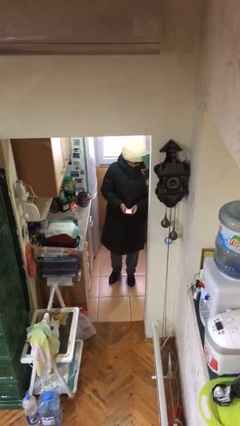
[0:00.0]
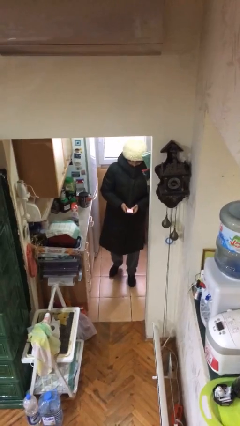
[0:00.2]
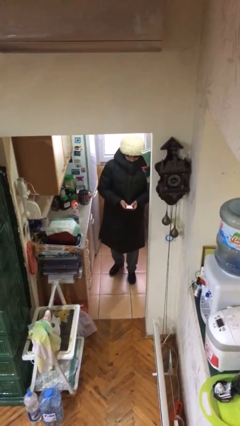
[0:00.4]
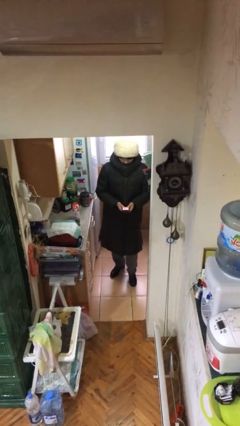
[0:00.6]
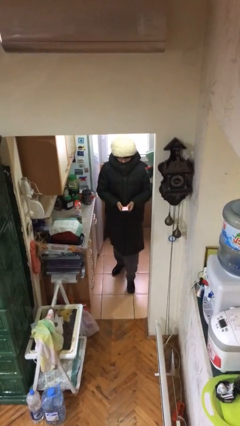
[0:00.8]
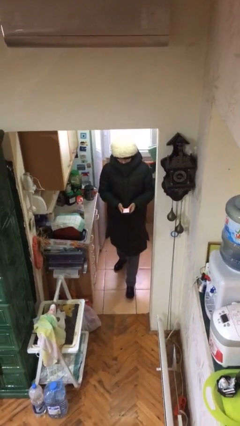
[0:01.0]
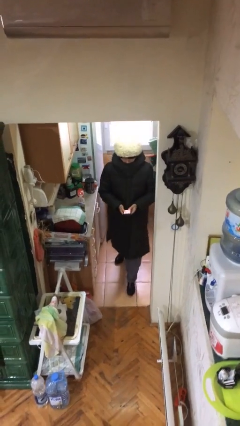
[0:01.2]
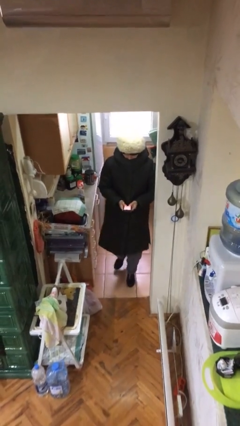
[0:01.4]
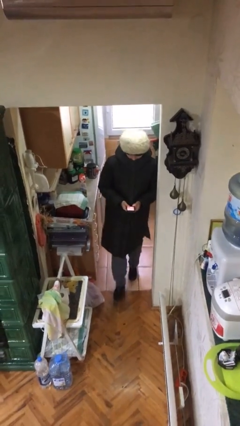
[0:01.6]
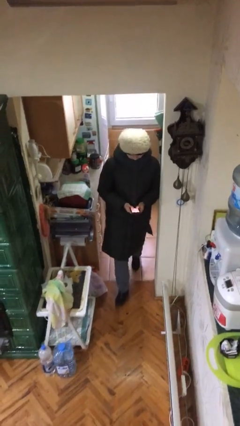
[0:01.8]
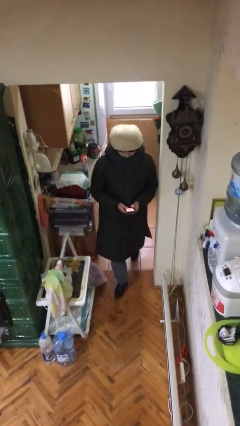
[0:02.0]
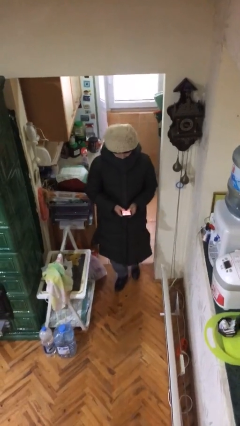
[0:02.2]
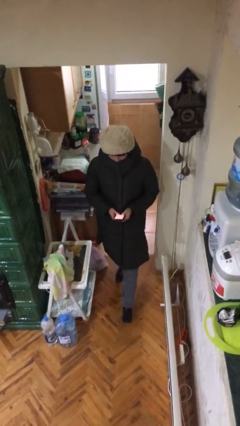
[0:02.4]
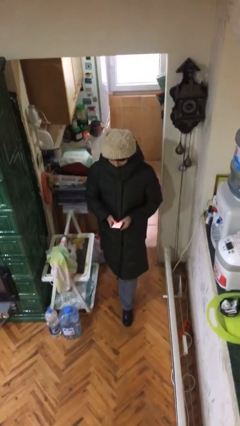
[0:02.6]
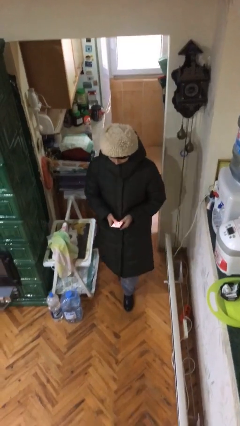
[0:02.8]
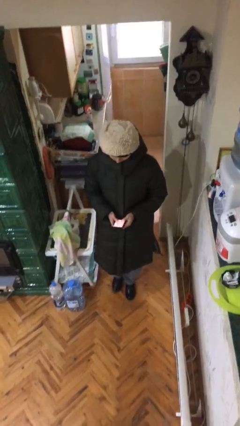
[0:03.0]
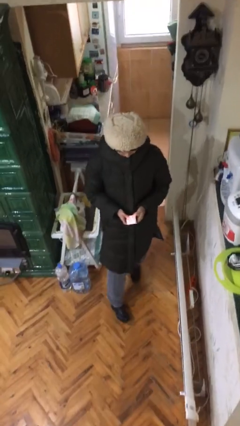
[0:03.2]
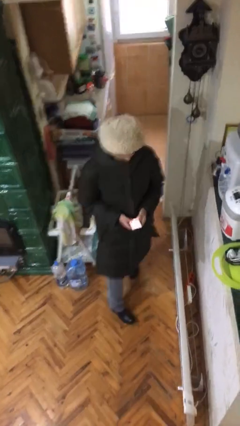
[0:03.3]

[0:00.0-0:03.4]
person enters scene through structure

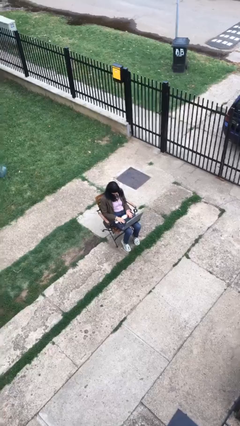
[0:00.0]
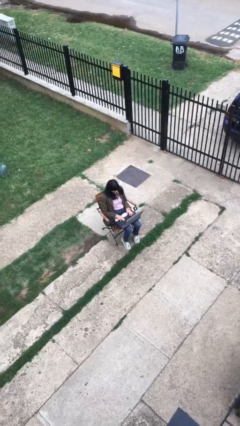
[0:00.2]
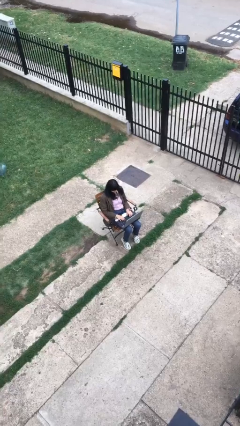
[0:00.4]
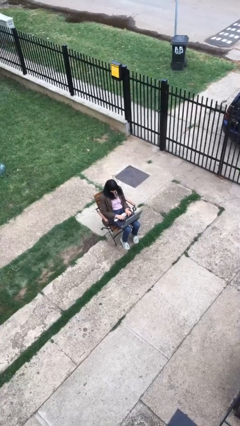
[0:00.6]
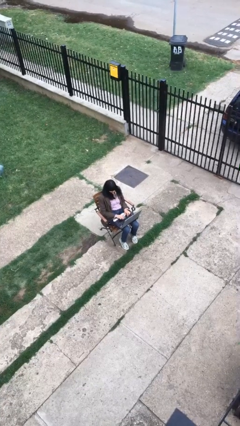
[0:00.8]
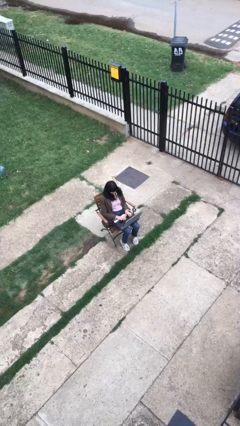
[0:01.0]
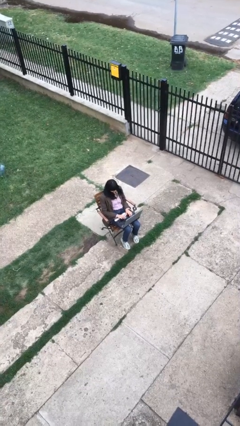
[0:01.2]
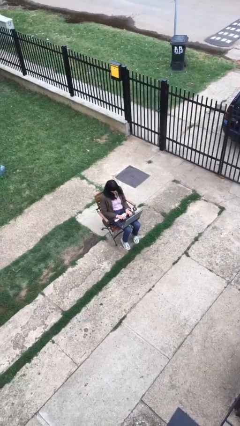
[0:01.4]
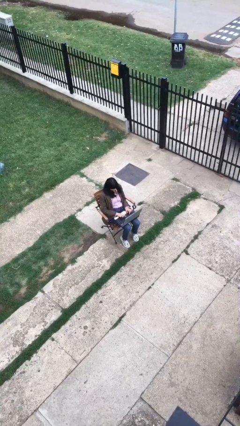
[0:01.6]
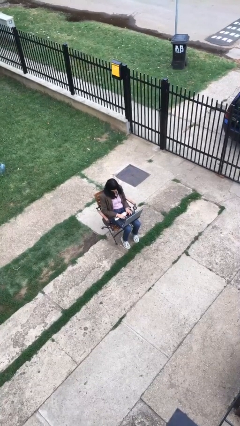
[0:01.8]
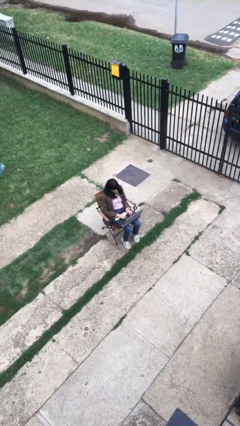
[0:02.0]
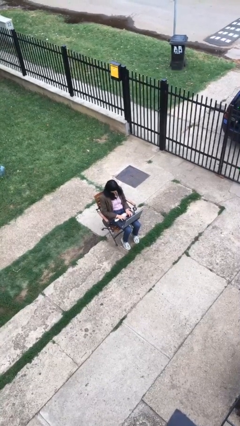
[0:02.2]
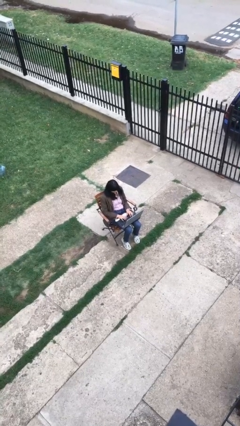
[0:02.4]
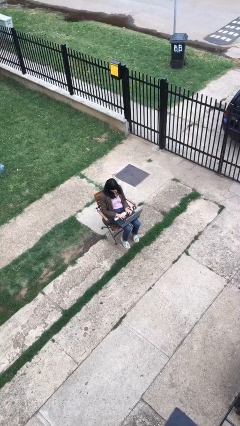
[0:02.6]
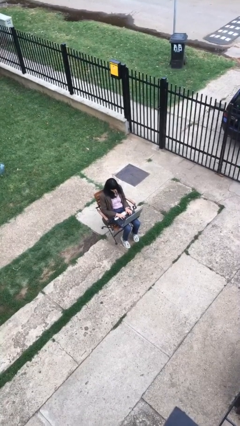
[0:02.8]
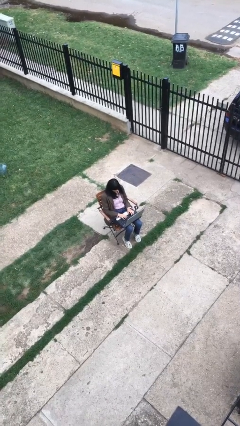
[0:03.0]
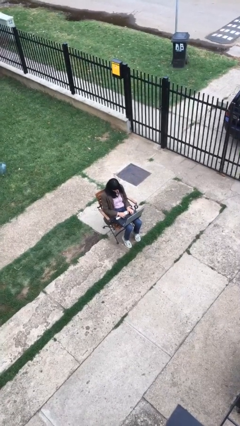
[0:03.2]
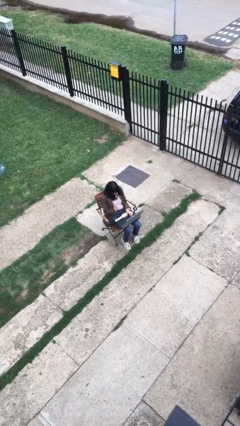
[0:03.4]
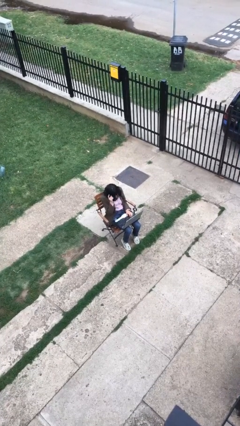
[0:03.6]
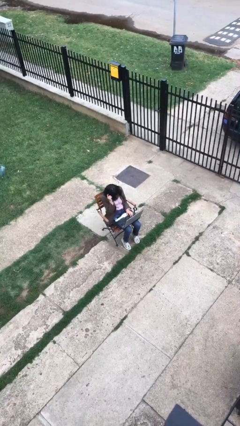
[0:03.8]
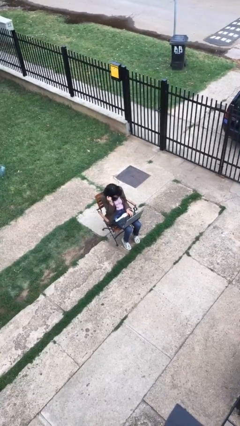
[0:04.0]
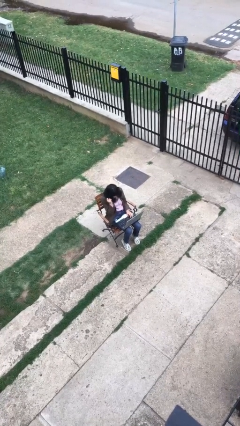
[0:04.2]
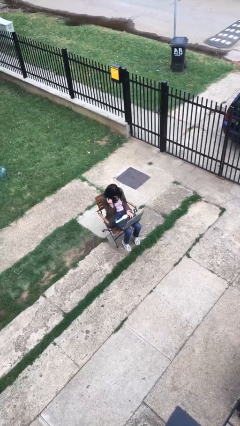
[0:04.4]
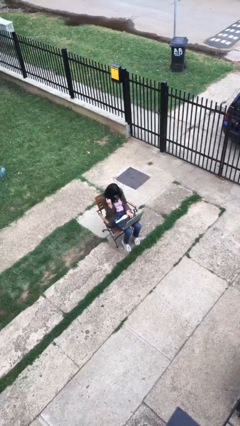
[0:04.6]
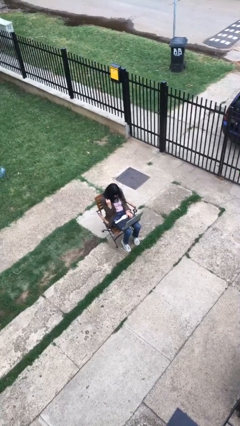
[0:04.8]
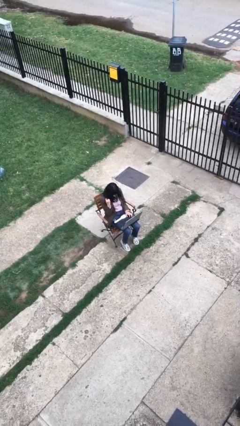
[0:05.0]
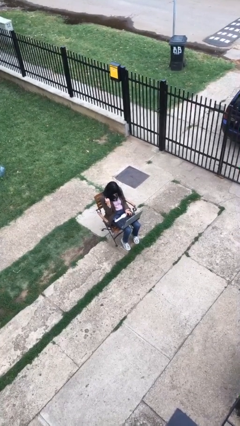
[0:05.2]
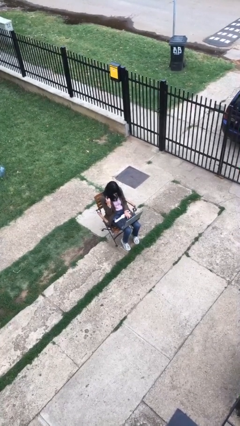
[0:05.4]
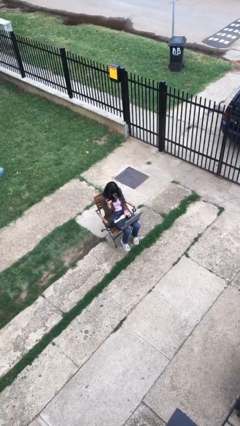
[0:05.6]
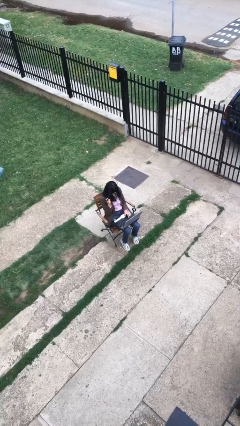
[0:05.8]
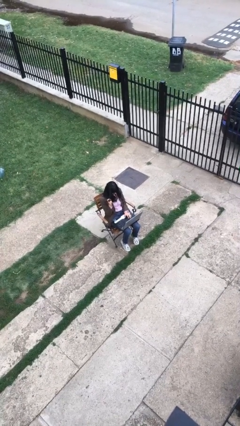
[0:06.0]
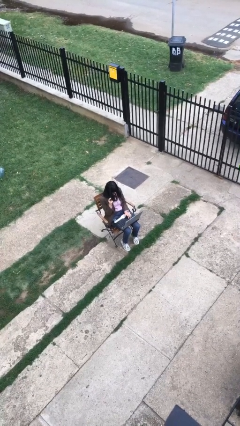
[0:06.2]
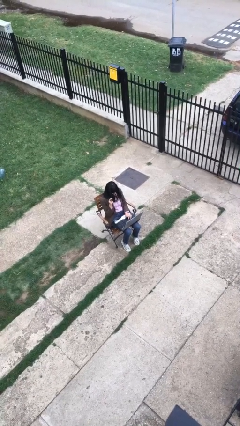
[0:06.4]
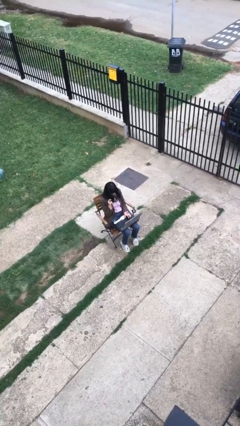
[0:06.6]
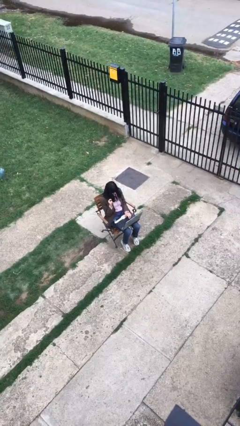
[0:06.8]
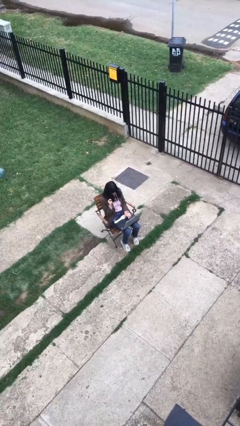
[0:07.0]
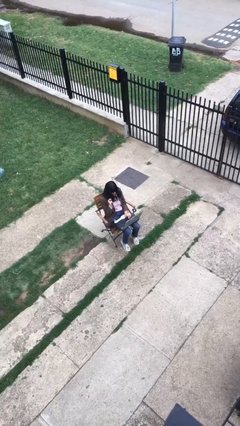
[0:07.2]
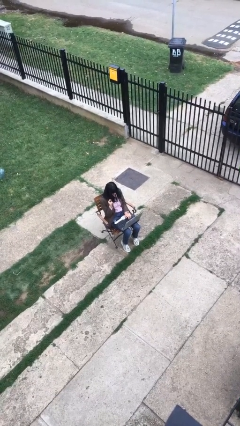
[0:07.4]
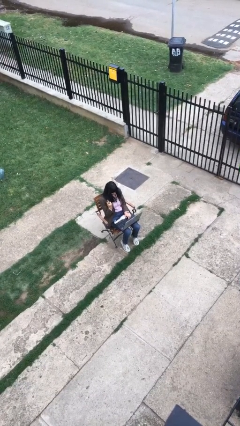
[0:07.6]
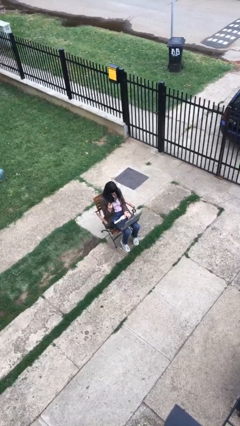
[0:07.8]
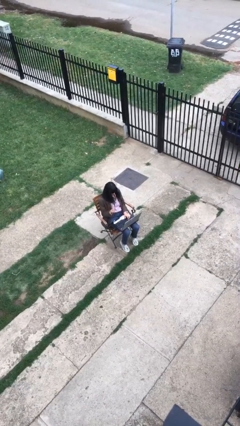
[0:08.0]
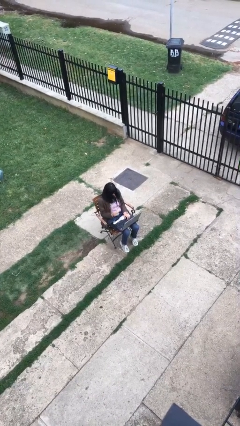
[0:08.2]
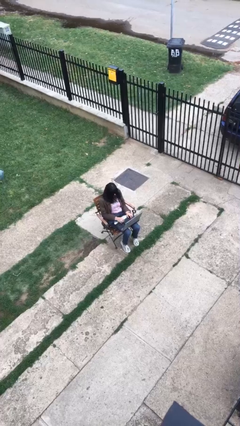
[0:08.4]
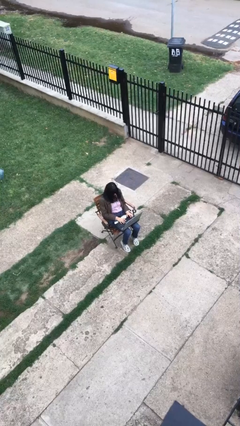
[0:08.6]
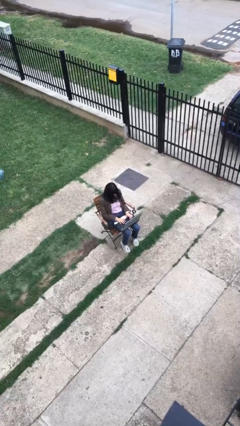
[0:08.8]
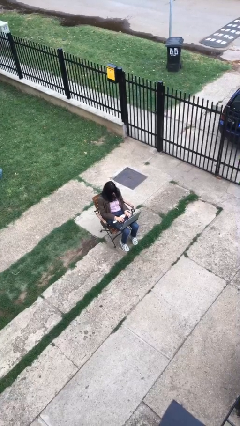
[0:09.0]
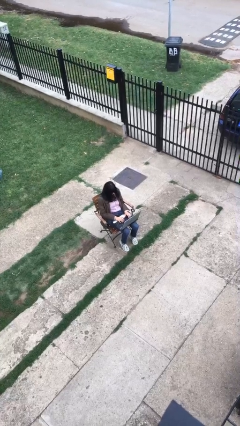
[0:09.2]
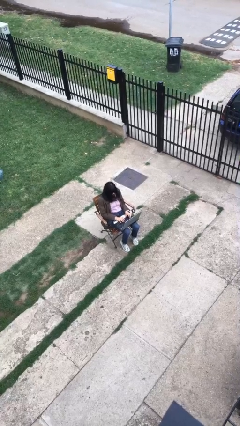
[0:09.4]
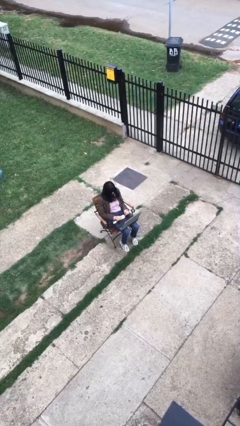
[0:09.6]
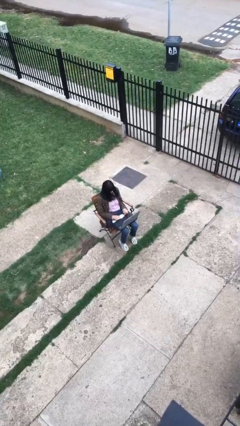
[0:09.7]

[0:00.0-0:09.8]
person interacts with laptop

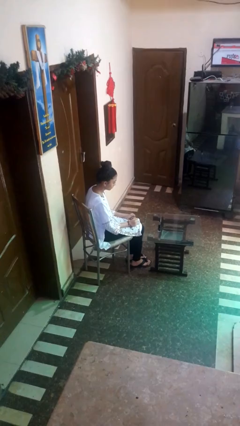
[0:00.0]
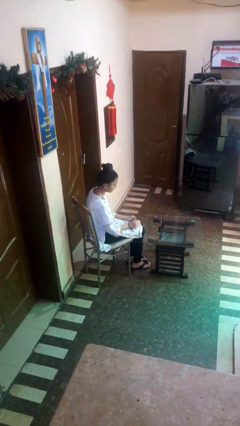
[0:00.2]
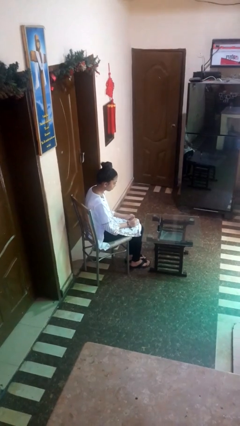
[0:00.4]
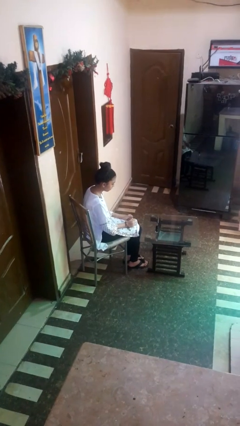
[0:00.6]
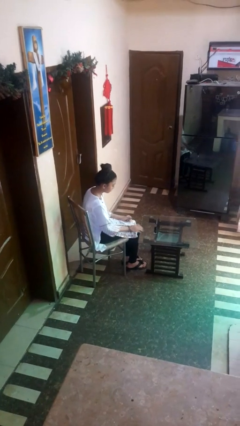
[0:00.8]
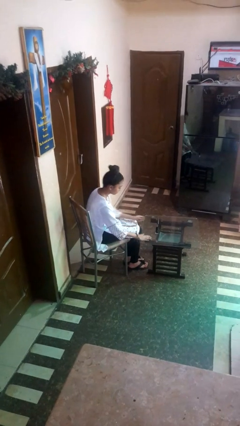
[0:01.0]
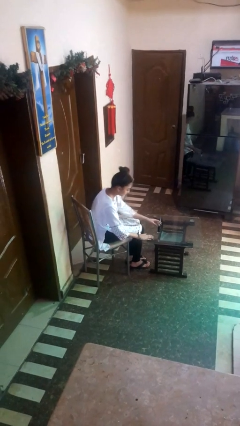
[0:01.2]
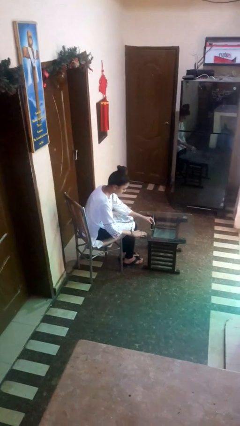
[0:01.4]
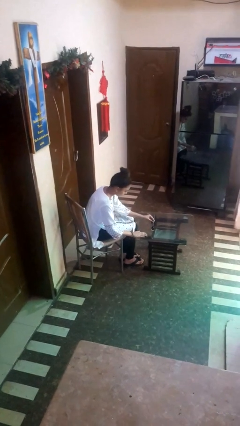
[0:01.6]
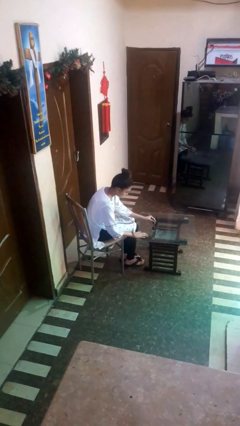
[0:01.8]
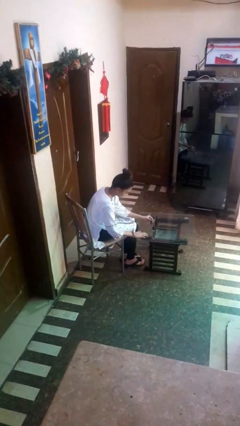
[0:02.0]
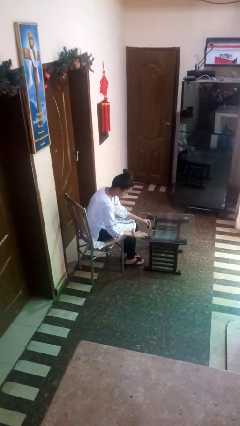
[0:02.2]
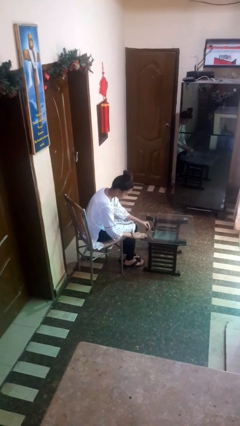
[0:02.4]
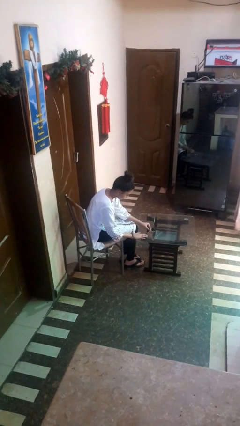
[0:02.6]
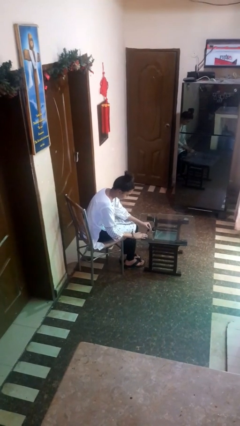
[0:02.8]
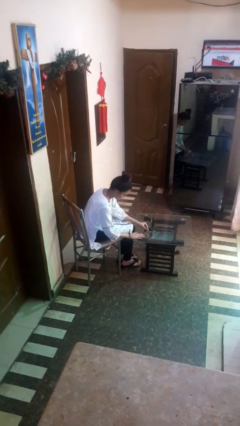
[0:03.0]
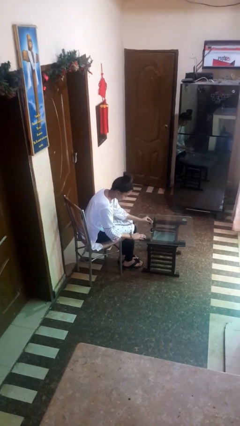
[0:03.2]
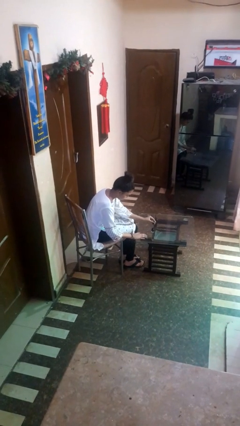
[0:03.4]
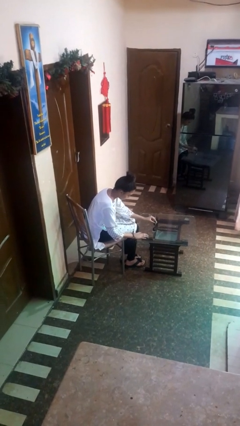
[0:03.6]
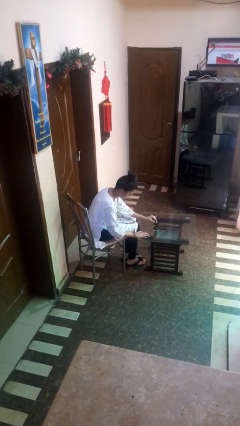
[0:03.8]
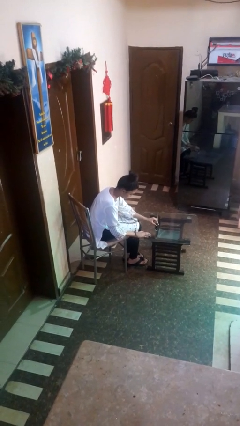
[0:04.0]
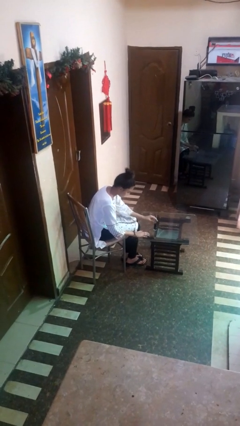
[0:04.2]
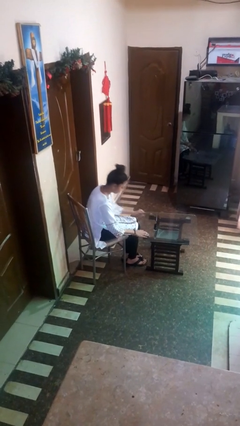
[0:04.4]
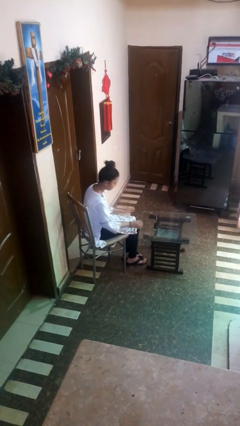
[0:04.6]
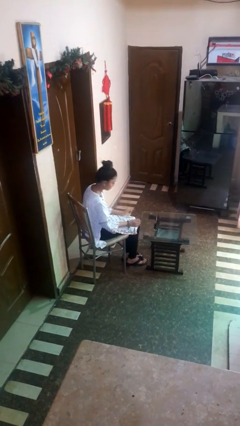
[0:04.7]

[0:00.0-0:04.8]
person paints fingernails
